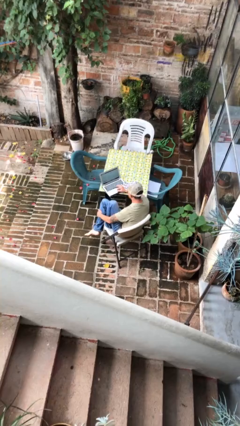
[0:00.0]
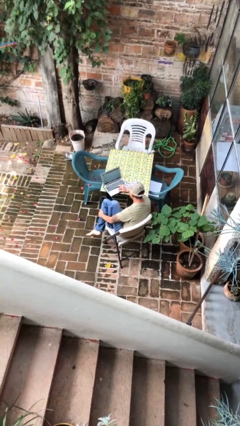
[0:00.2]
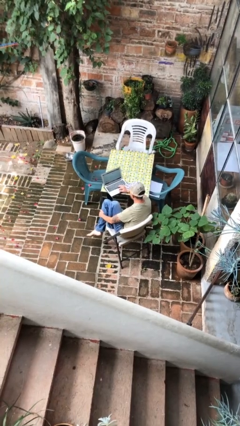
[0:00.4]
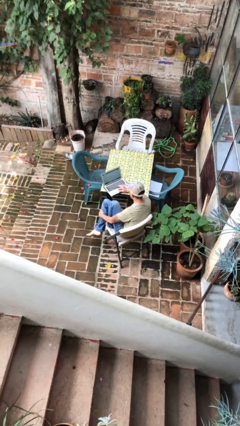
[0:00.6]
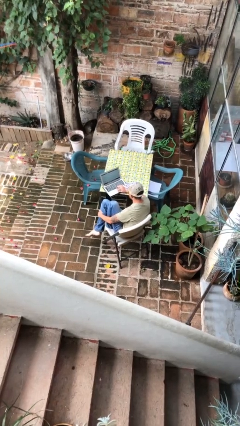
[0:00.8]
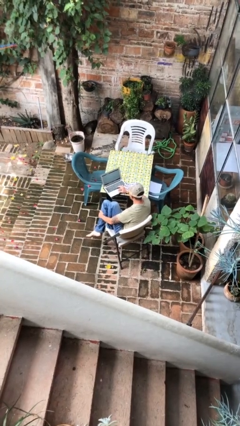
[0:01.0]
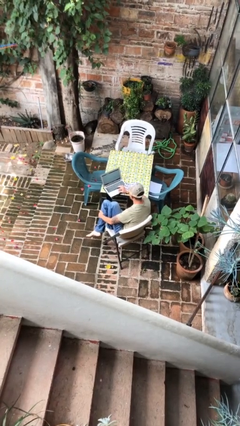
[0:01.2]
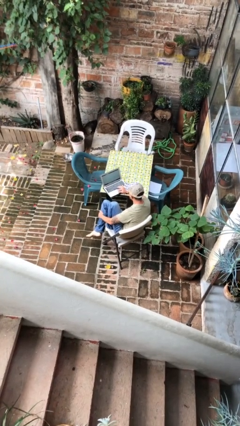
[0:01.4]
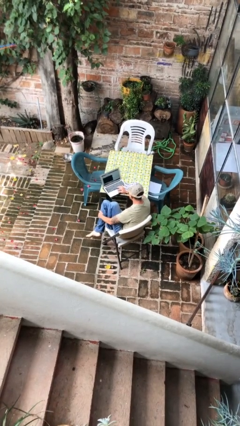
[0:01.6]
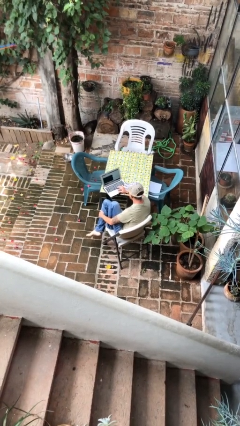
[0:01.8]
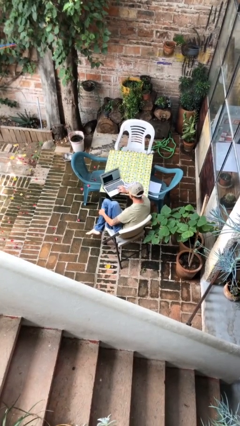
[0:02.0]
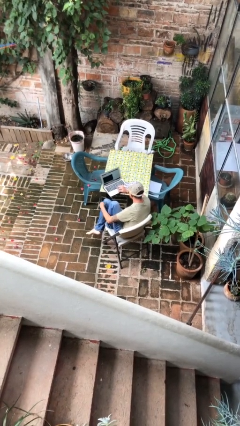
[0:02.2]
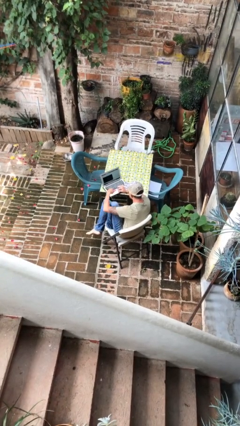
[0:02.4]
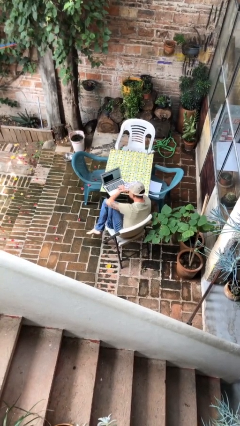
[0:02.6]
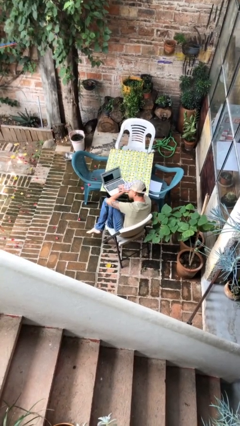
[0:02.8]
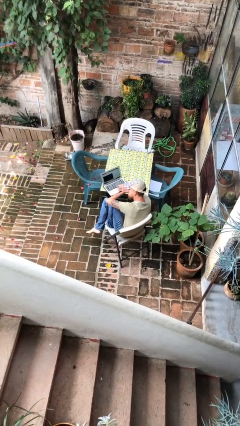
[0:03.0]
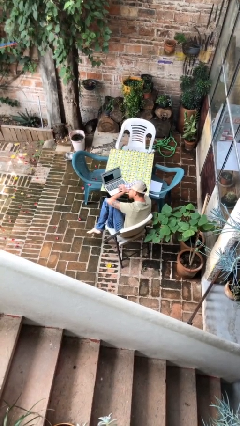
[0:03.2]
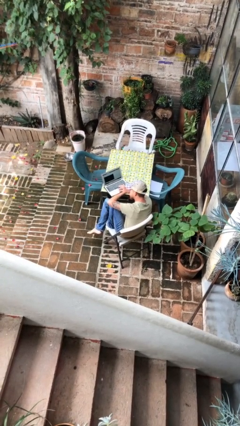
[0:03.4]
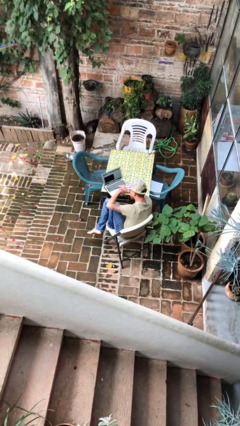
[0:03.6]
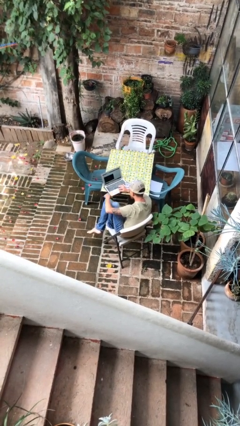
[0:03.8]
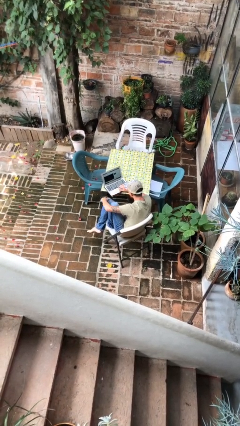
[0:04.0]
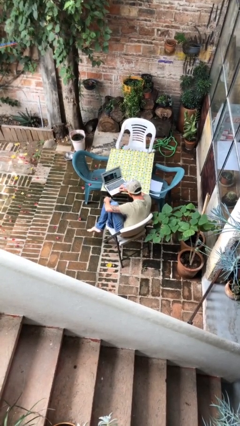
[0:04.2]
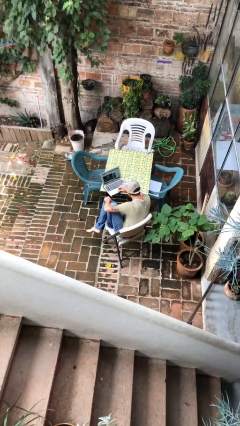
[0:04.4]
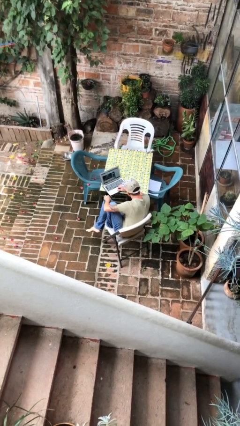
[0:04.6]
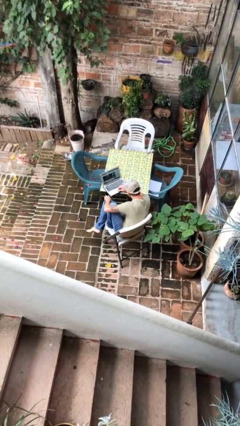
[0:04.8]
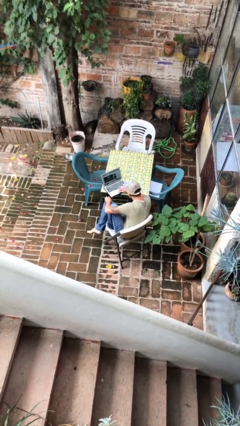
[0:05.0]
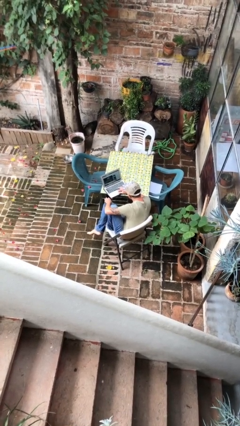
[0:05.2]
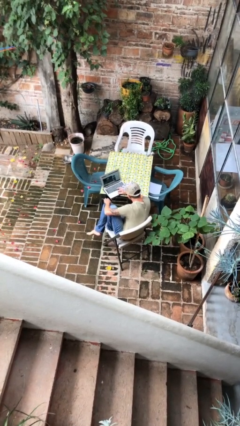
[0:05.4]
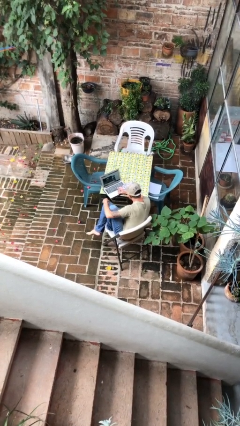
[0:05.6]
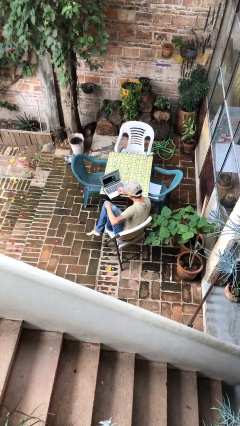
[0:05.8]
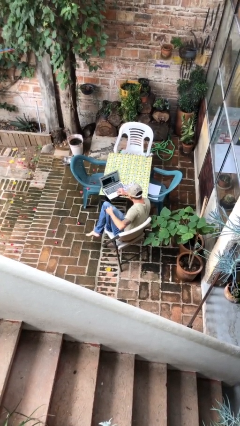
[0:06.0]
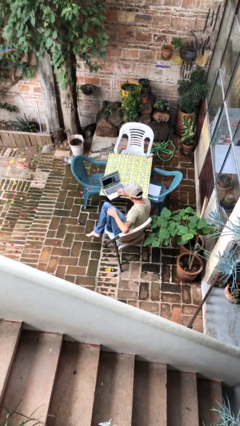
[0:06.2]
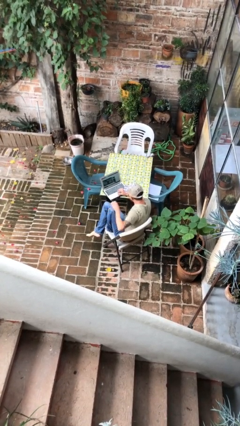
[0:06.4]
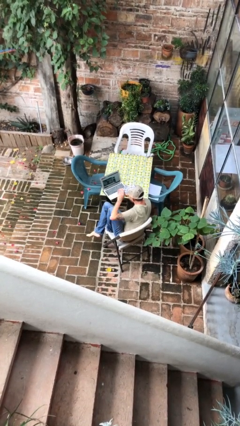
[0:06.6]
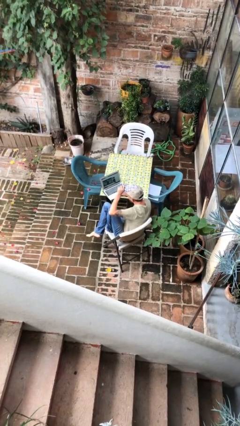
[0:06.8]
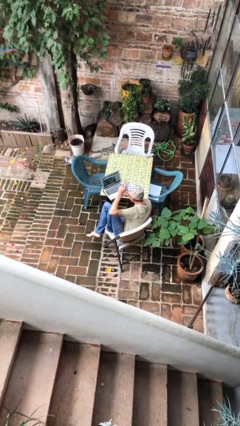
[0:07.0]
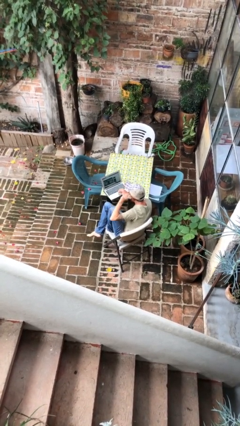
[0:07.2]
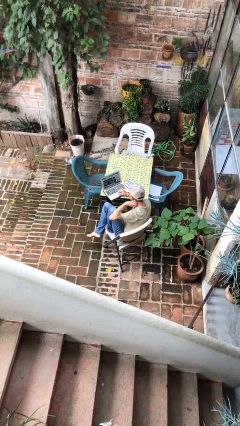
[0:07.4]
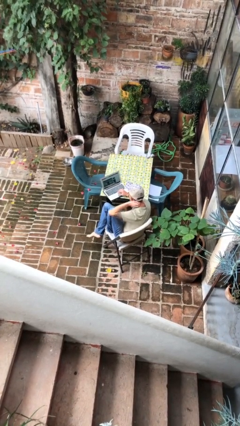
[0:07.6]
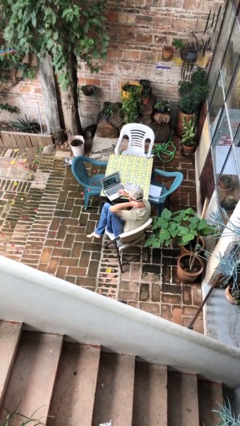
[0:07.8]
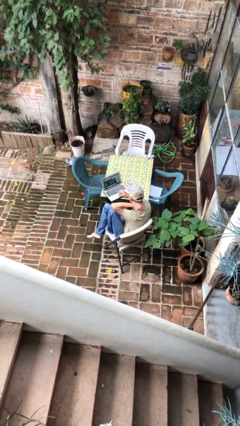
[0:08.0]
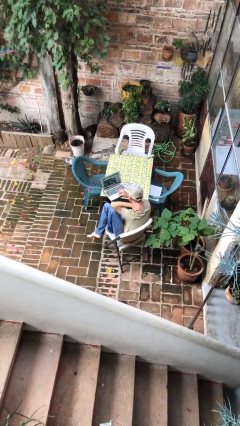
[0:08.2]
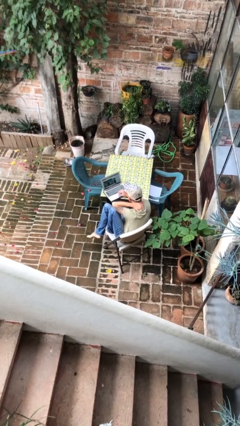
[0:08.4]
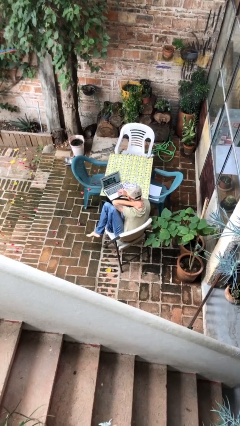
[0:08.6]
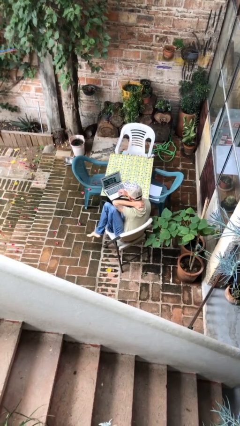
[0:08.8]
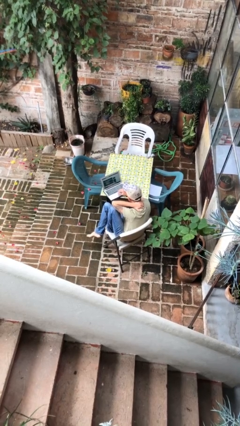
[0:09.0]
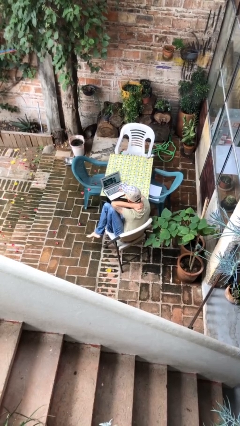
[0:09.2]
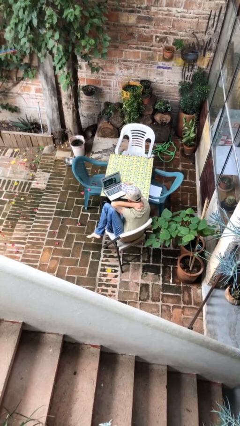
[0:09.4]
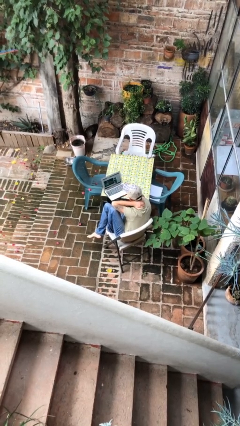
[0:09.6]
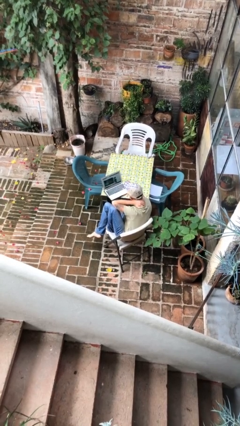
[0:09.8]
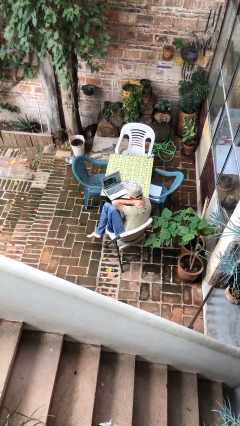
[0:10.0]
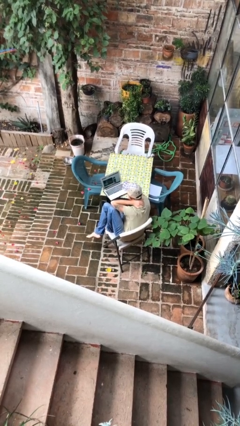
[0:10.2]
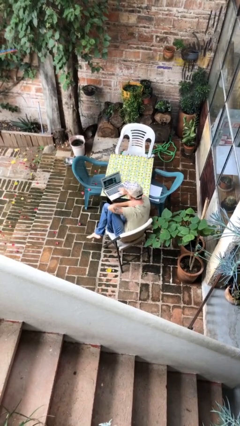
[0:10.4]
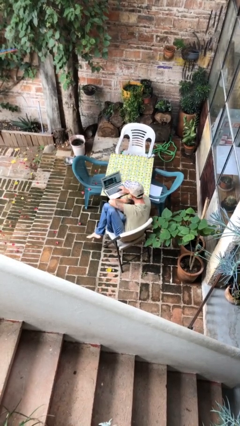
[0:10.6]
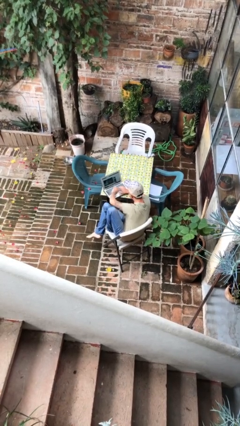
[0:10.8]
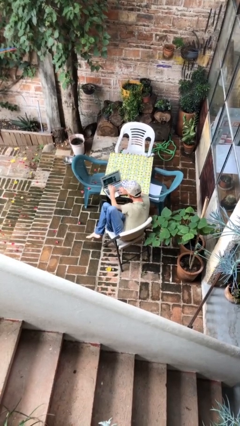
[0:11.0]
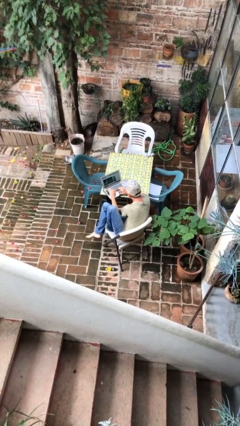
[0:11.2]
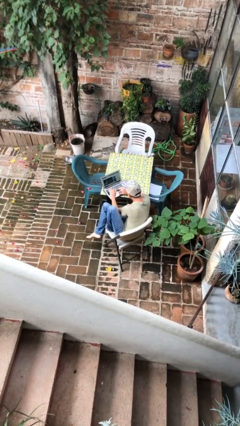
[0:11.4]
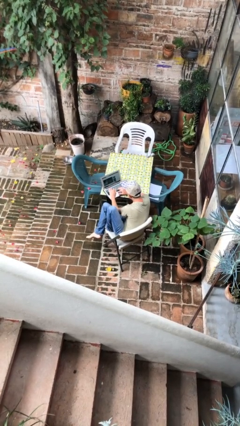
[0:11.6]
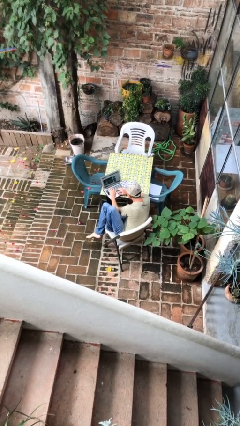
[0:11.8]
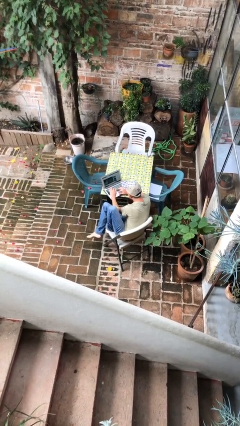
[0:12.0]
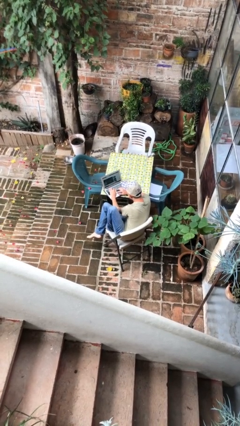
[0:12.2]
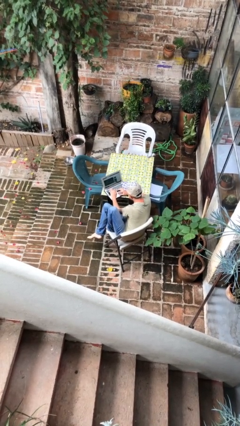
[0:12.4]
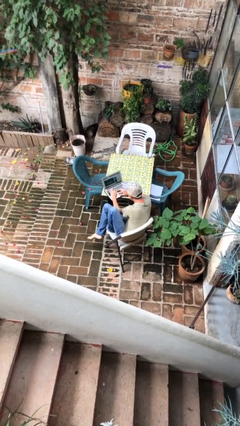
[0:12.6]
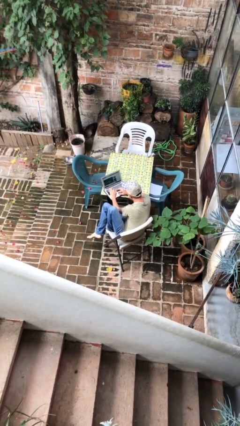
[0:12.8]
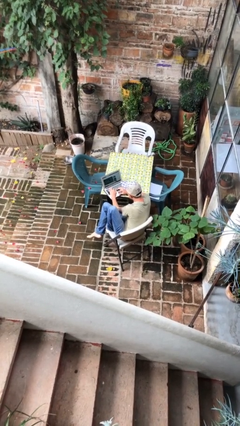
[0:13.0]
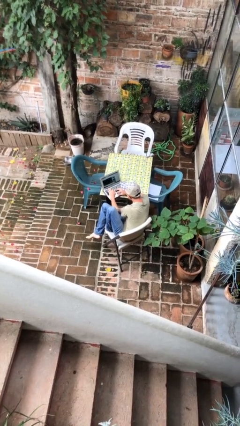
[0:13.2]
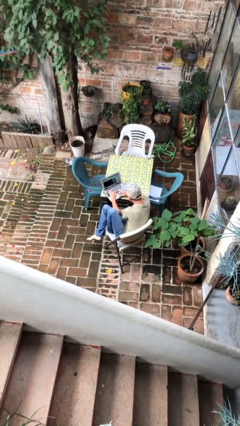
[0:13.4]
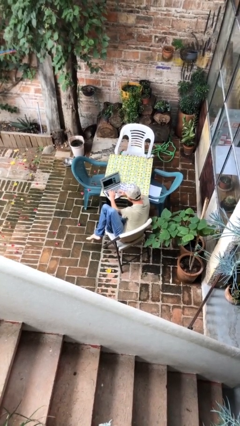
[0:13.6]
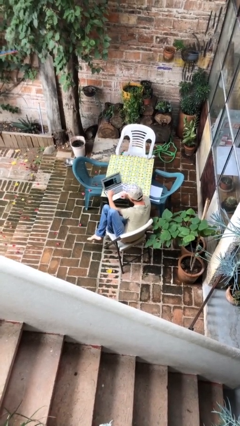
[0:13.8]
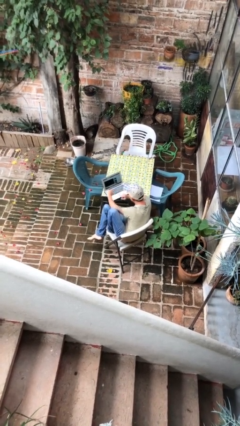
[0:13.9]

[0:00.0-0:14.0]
person interacts with laptop

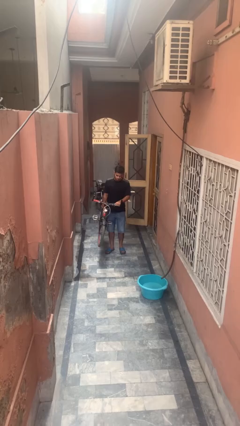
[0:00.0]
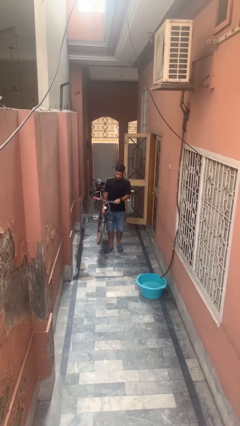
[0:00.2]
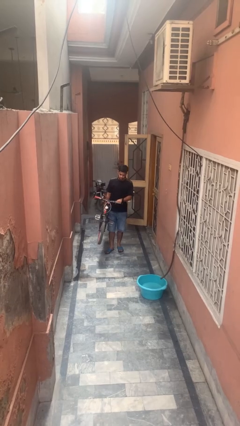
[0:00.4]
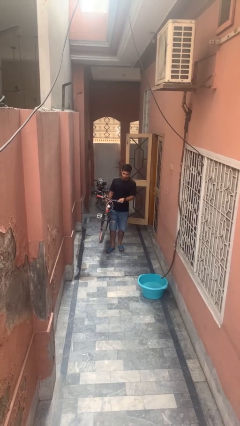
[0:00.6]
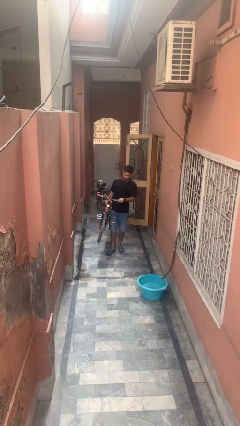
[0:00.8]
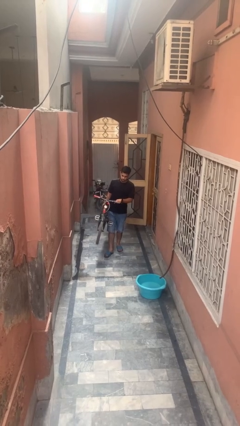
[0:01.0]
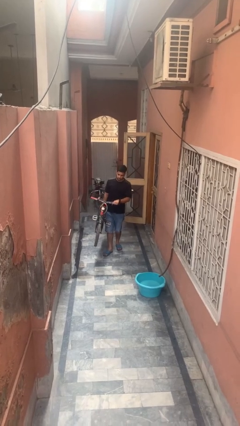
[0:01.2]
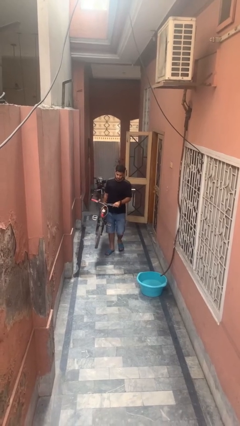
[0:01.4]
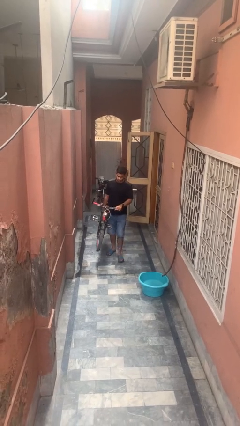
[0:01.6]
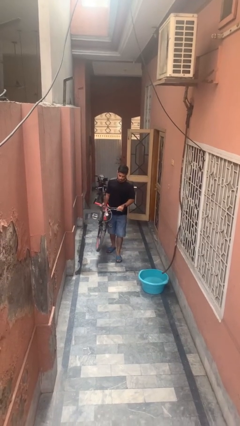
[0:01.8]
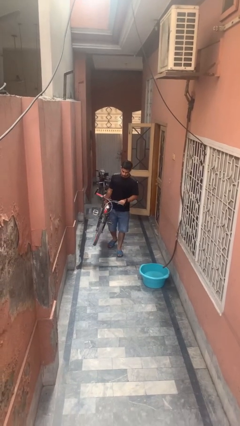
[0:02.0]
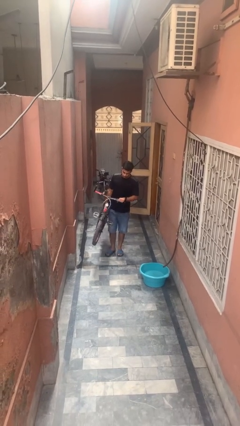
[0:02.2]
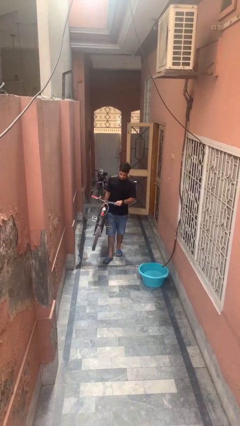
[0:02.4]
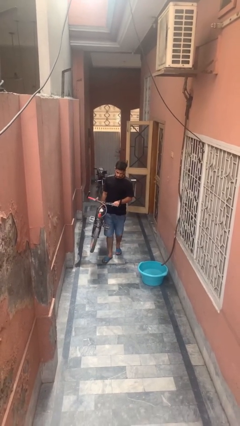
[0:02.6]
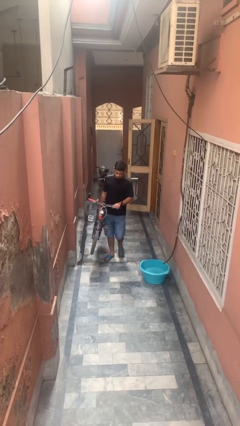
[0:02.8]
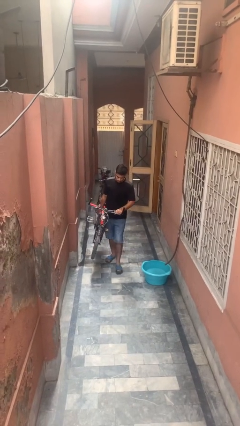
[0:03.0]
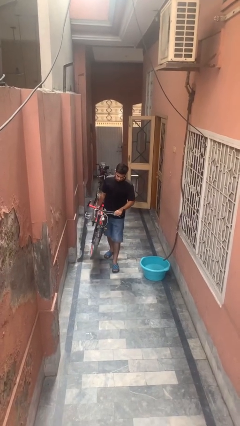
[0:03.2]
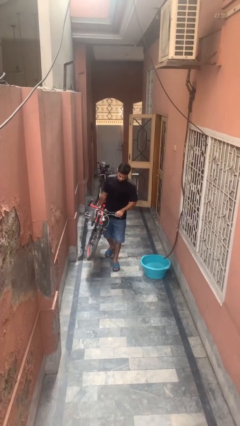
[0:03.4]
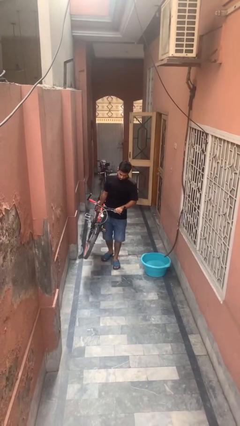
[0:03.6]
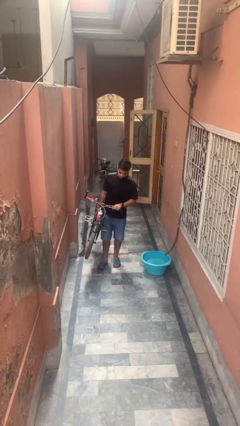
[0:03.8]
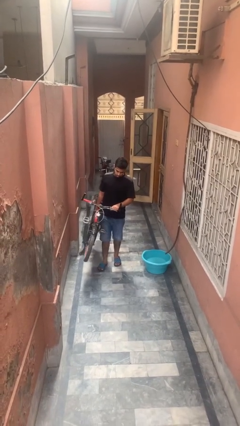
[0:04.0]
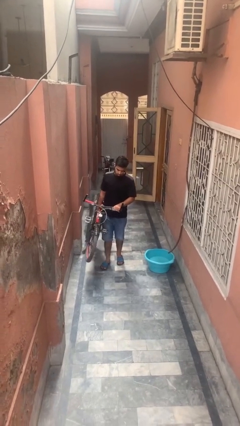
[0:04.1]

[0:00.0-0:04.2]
person carries bicycle

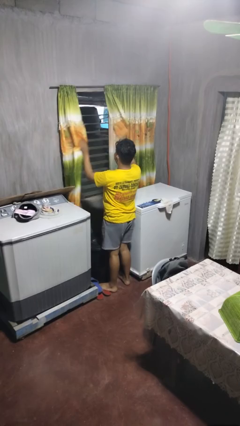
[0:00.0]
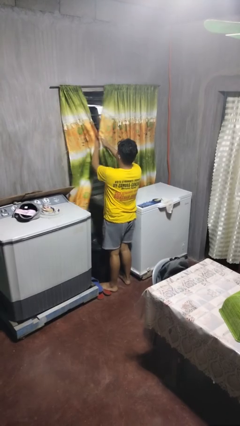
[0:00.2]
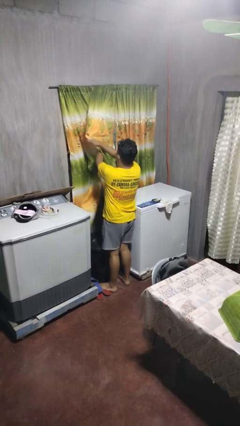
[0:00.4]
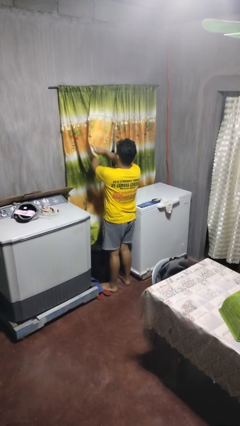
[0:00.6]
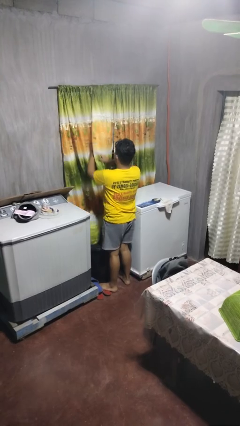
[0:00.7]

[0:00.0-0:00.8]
person closes curtains
